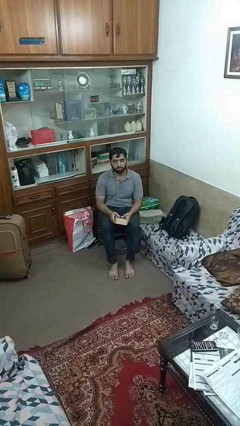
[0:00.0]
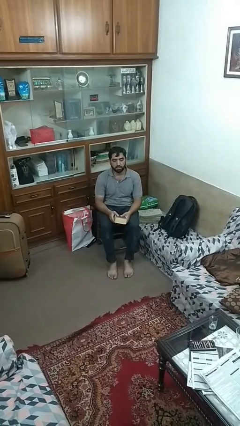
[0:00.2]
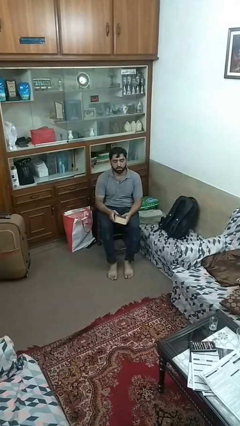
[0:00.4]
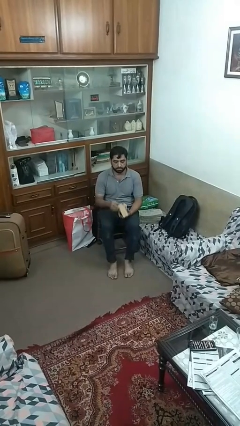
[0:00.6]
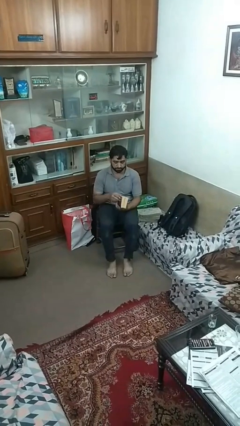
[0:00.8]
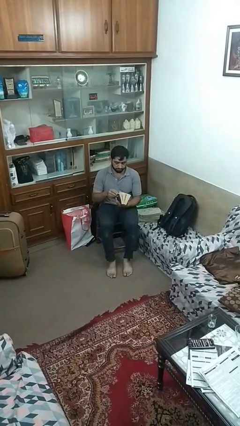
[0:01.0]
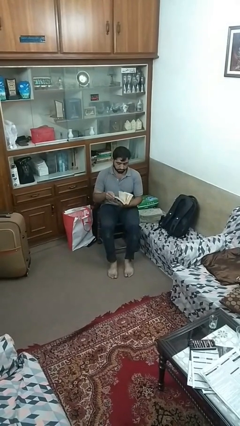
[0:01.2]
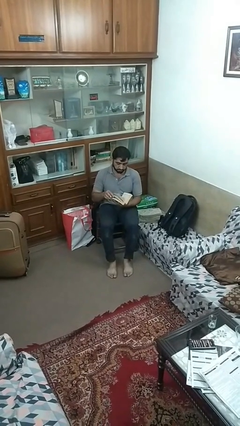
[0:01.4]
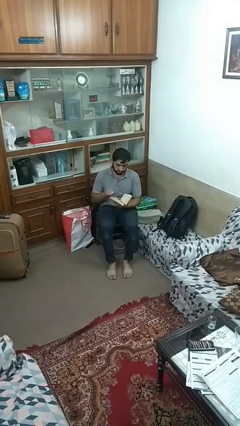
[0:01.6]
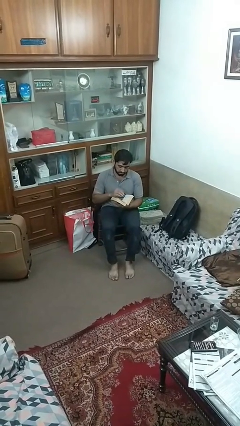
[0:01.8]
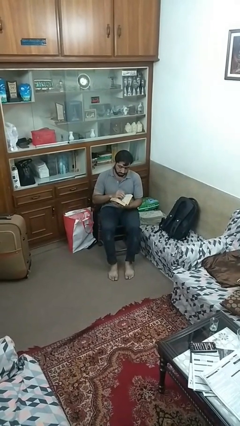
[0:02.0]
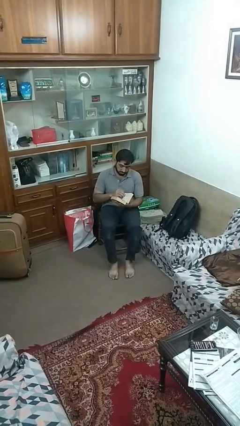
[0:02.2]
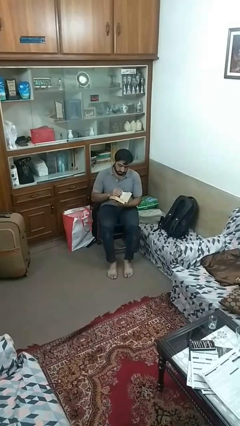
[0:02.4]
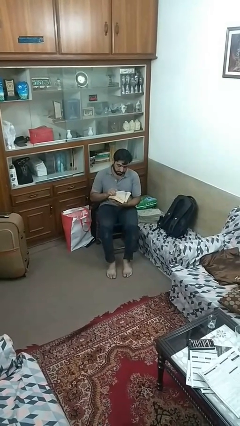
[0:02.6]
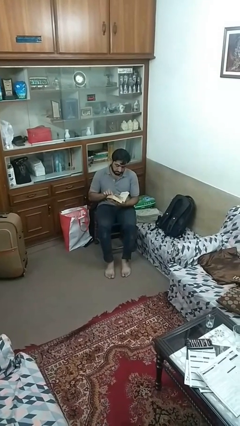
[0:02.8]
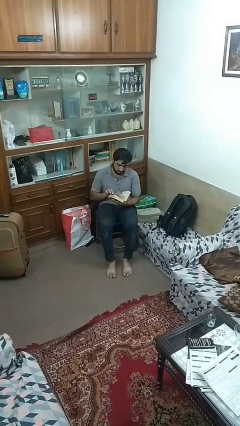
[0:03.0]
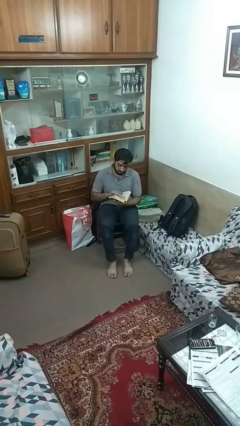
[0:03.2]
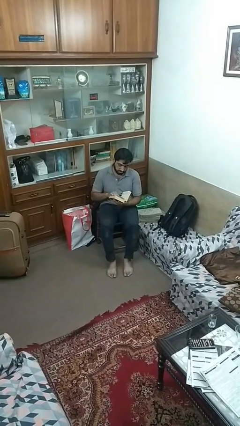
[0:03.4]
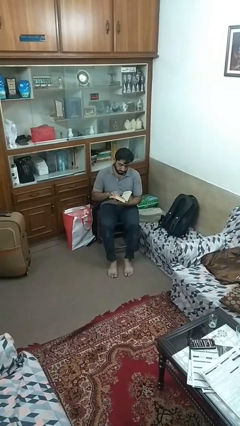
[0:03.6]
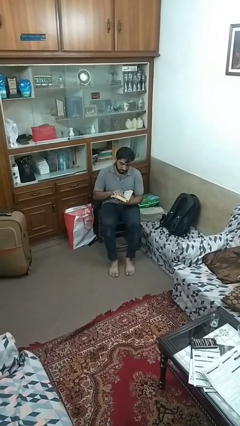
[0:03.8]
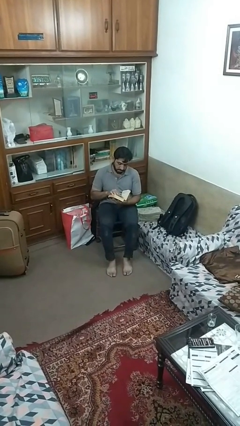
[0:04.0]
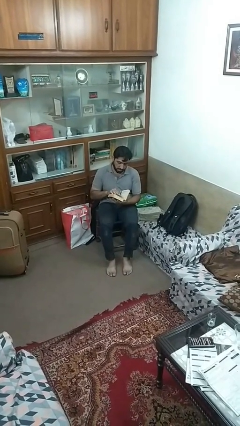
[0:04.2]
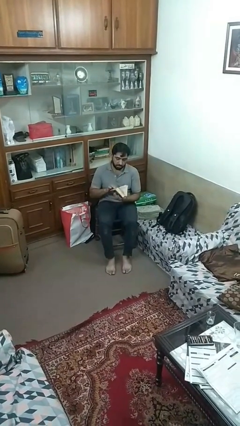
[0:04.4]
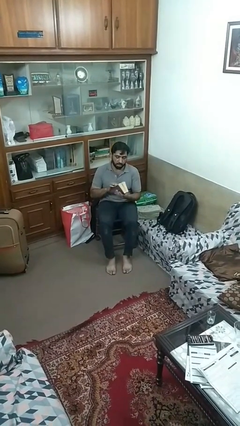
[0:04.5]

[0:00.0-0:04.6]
person reads book

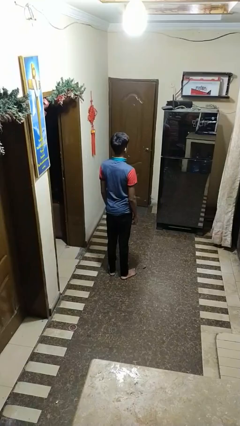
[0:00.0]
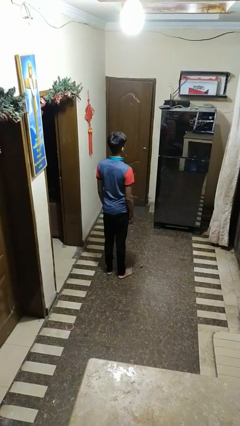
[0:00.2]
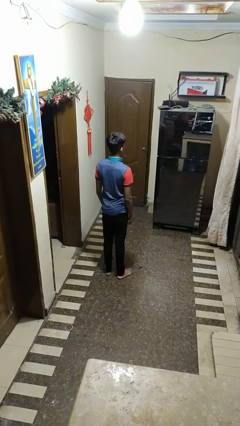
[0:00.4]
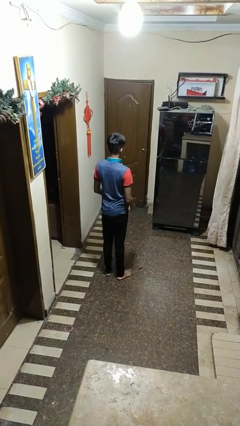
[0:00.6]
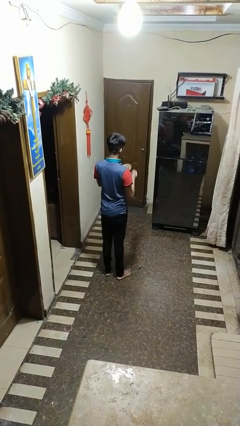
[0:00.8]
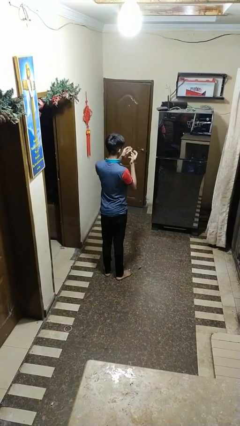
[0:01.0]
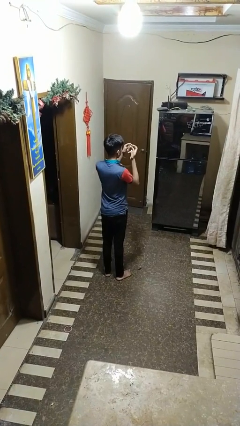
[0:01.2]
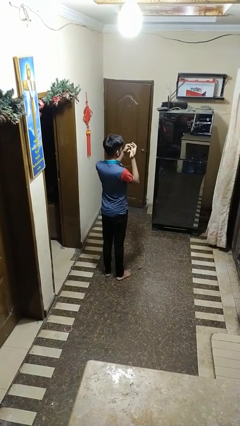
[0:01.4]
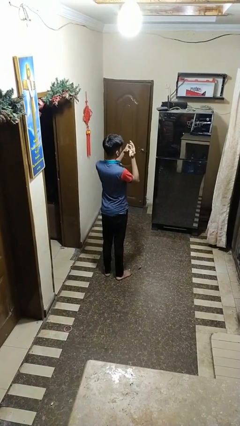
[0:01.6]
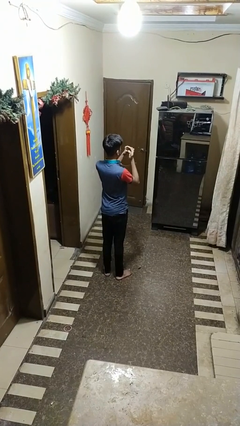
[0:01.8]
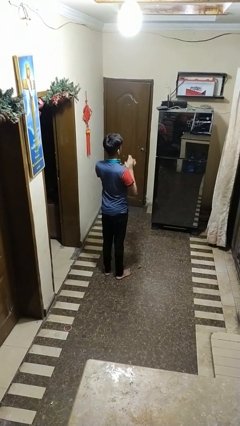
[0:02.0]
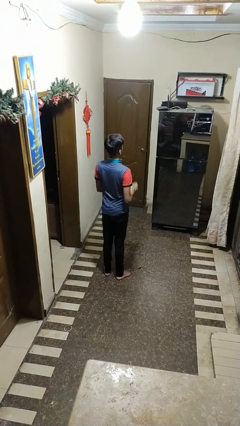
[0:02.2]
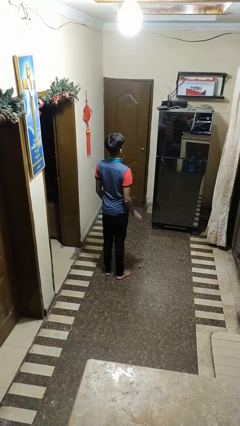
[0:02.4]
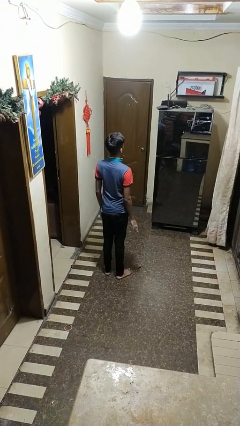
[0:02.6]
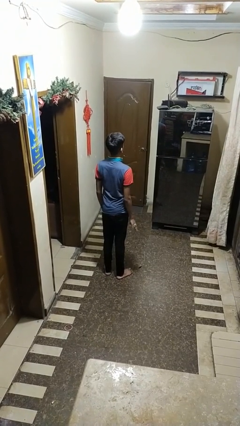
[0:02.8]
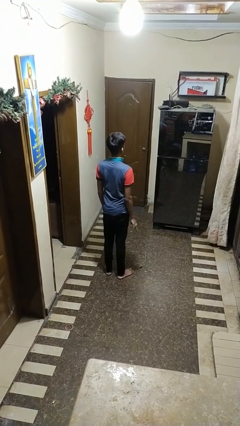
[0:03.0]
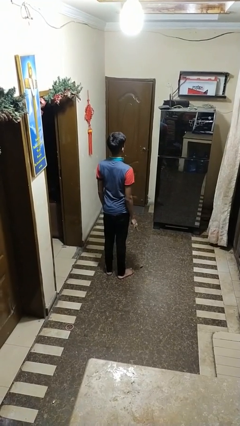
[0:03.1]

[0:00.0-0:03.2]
person puts on ring

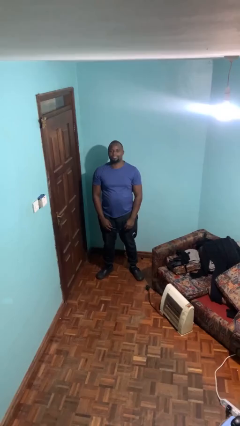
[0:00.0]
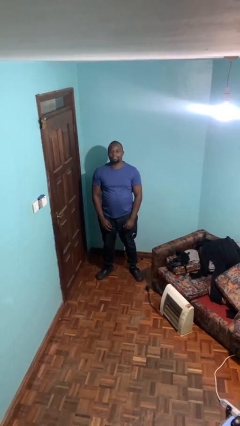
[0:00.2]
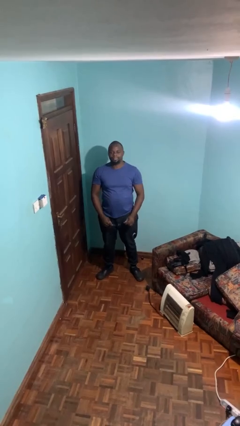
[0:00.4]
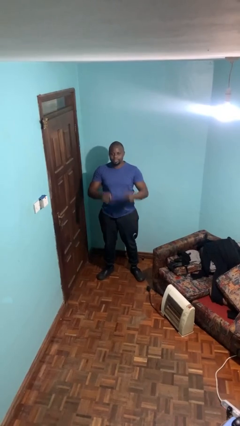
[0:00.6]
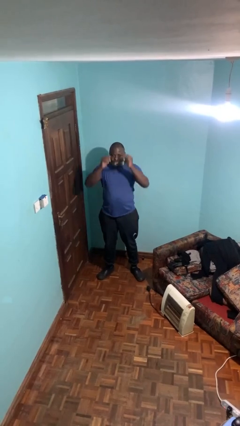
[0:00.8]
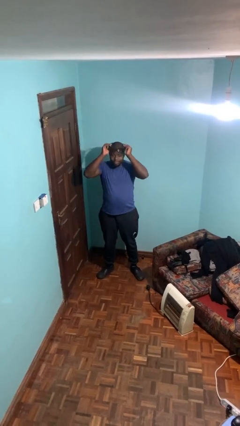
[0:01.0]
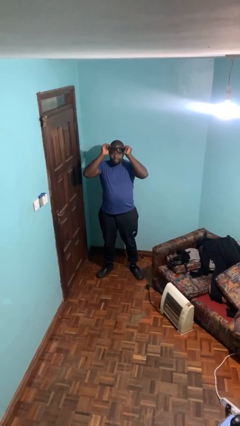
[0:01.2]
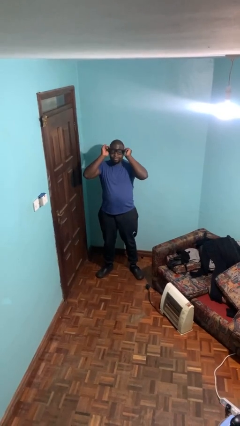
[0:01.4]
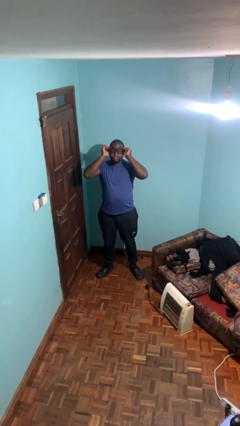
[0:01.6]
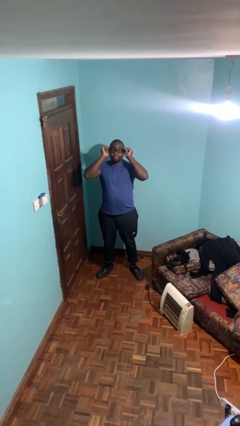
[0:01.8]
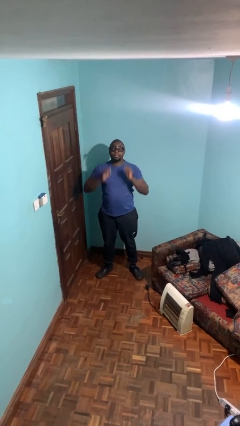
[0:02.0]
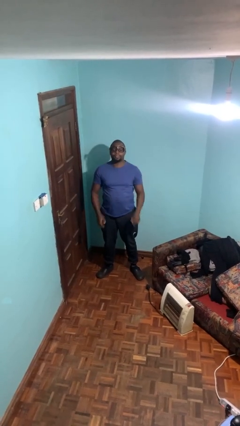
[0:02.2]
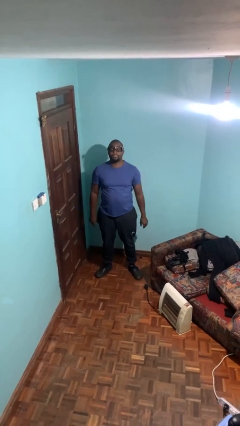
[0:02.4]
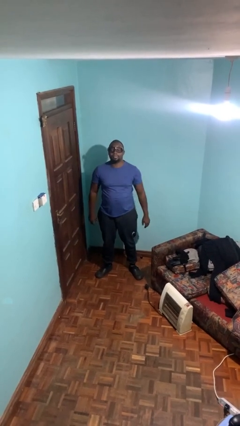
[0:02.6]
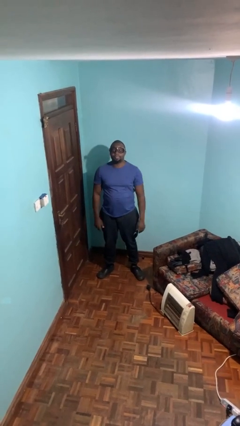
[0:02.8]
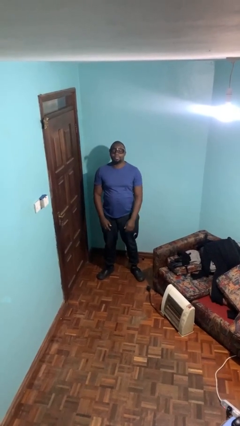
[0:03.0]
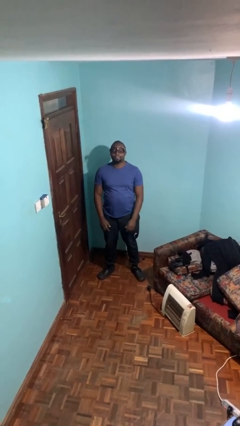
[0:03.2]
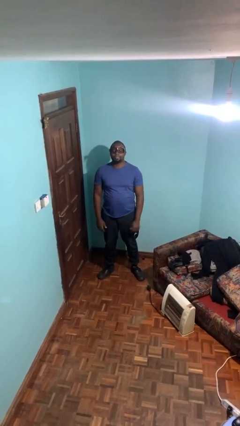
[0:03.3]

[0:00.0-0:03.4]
person puts on glasses

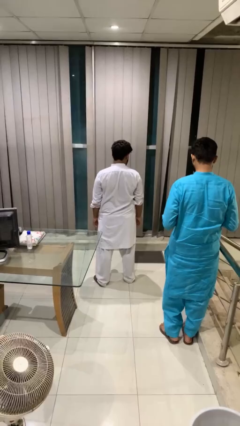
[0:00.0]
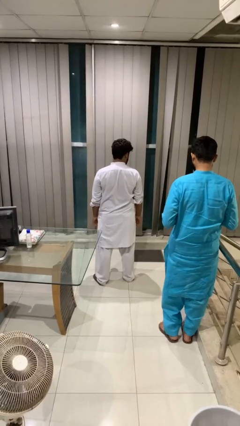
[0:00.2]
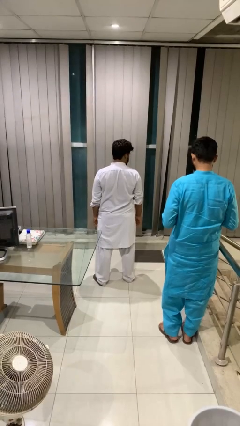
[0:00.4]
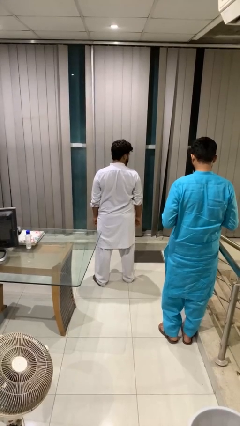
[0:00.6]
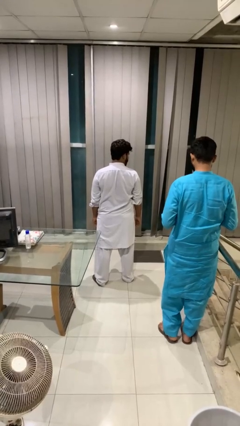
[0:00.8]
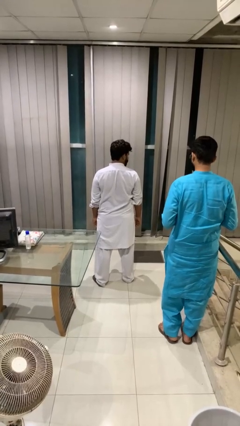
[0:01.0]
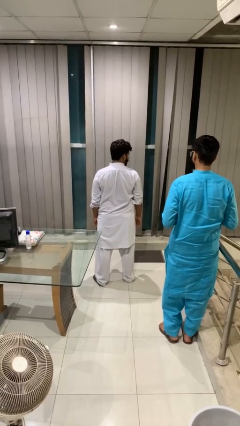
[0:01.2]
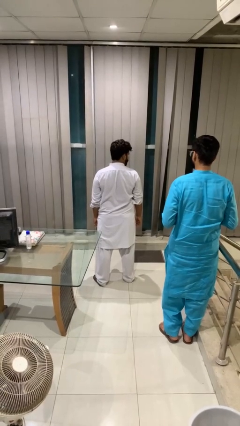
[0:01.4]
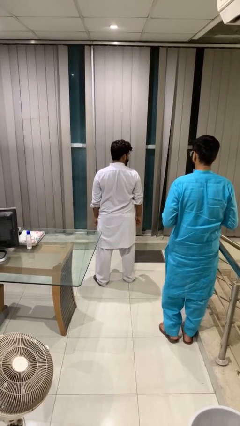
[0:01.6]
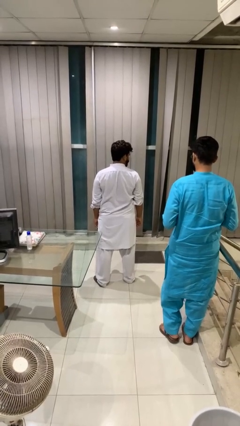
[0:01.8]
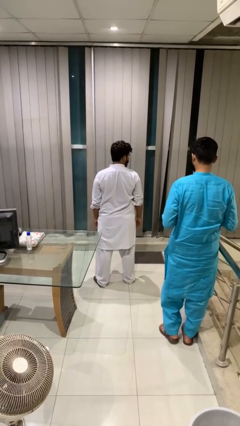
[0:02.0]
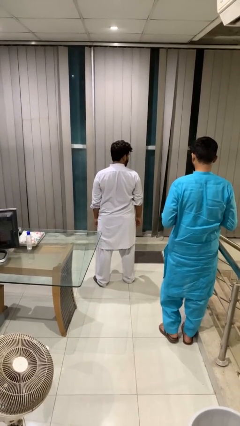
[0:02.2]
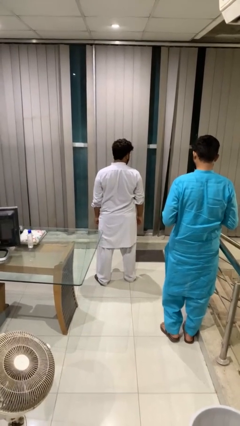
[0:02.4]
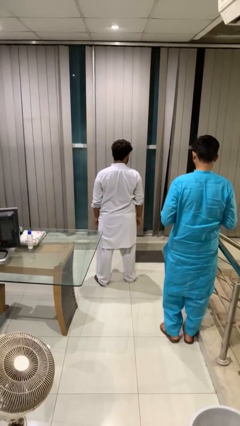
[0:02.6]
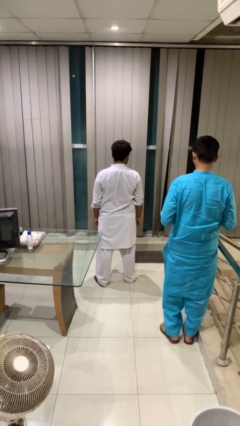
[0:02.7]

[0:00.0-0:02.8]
person looks over shoulder

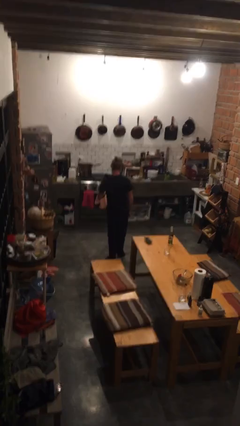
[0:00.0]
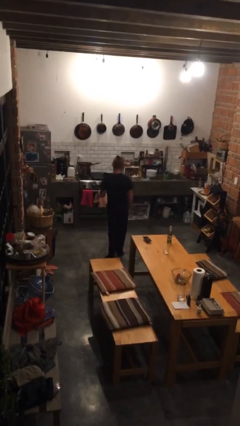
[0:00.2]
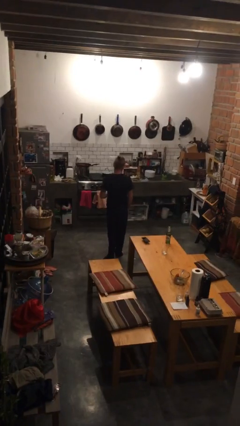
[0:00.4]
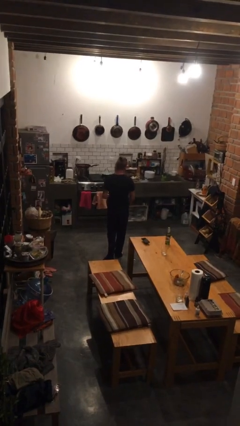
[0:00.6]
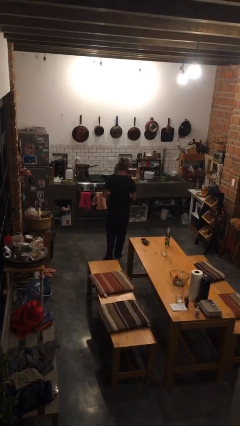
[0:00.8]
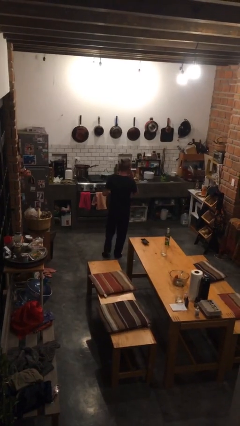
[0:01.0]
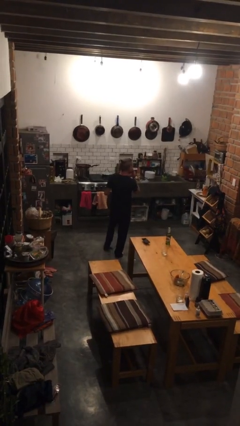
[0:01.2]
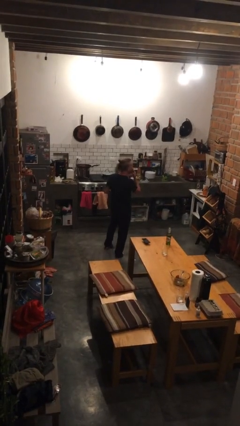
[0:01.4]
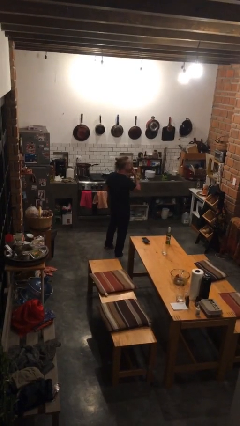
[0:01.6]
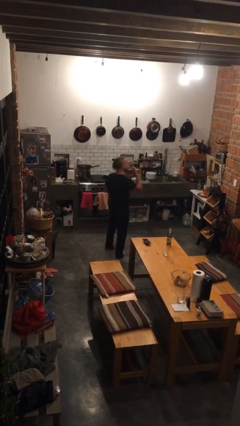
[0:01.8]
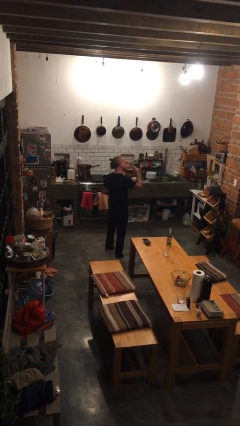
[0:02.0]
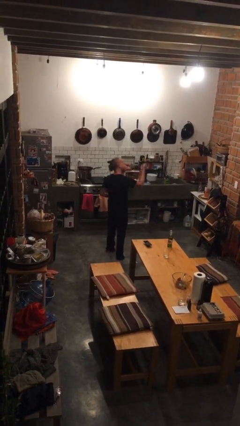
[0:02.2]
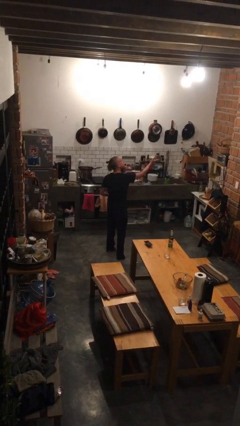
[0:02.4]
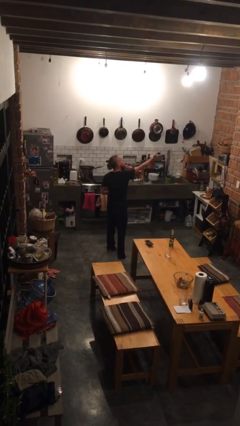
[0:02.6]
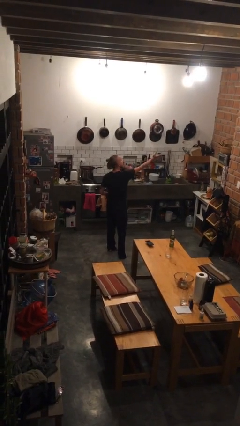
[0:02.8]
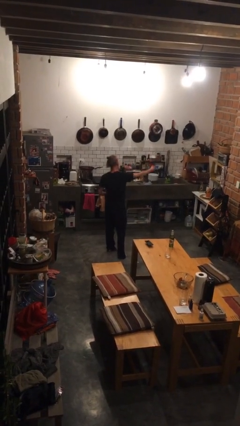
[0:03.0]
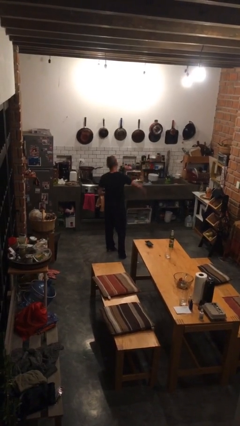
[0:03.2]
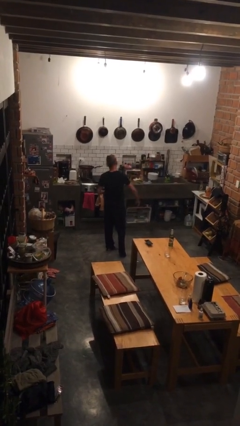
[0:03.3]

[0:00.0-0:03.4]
person gestures blow kiss

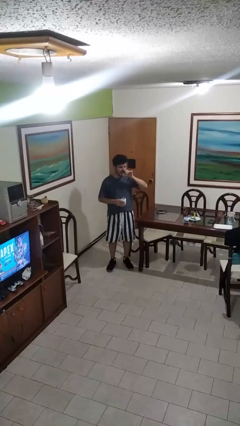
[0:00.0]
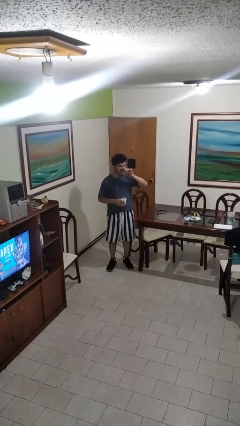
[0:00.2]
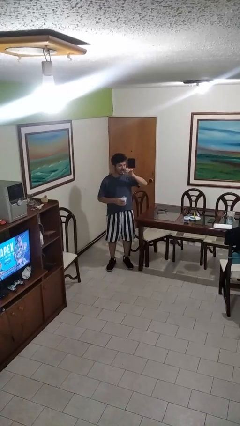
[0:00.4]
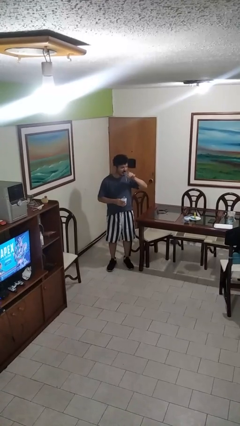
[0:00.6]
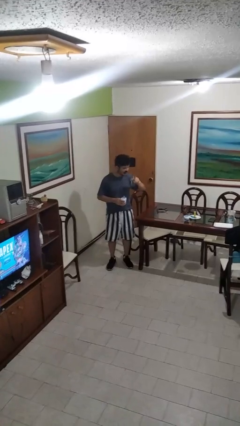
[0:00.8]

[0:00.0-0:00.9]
person drinks from cup
